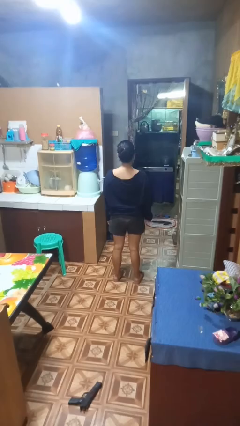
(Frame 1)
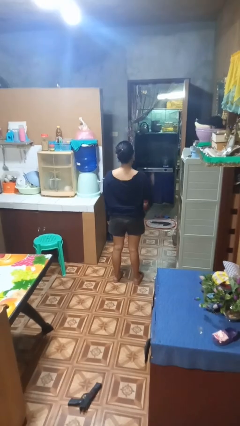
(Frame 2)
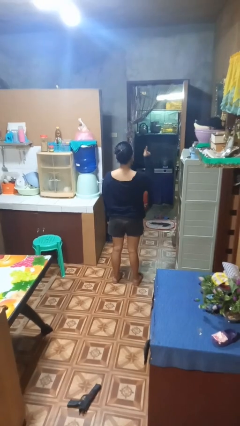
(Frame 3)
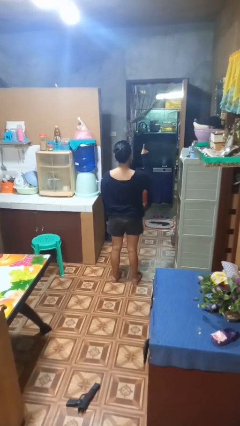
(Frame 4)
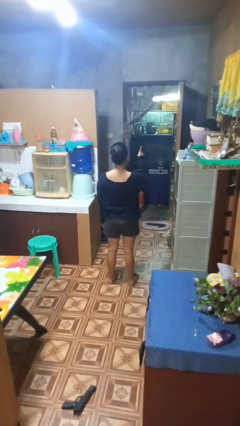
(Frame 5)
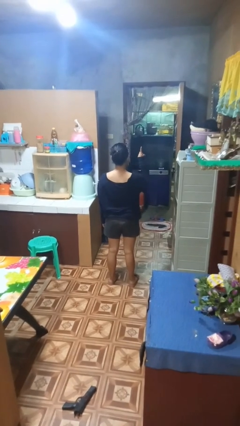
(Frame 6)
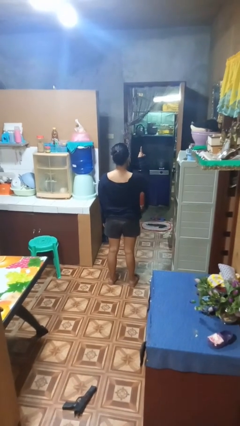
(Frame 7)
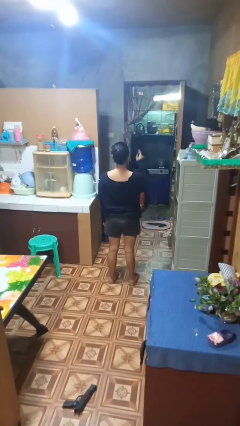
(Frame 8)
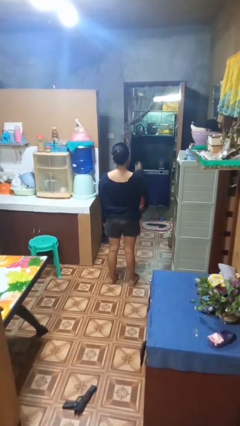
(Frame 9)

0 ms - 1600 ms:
person gestures number one

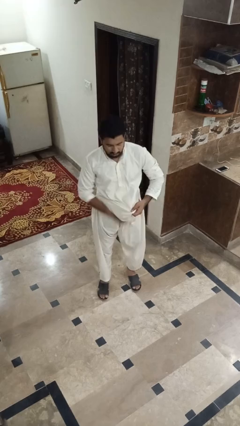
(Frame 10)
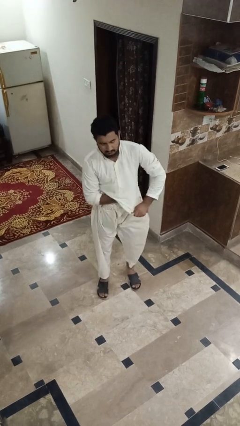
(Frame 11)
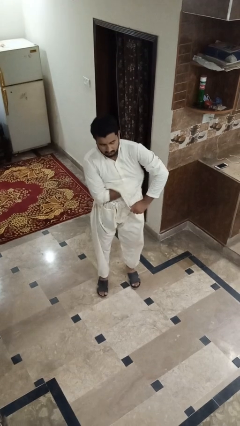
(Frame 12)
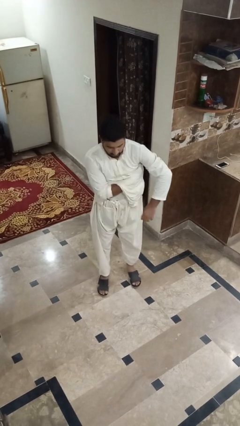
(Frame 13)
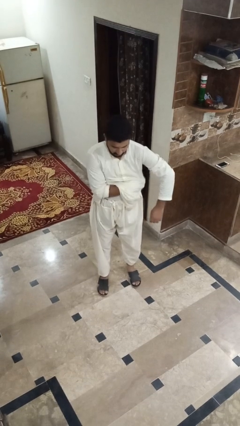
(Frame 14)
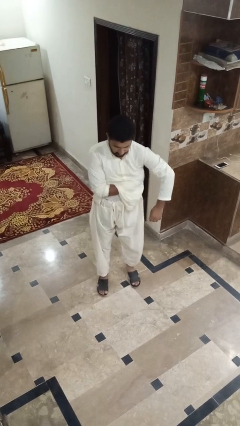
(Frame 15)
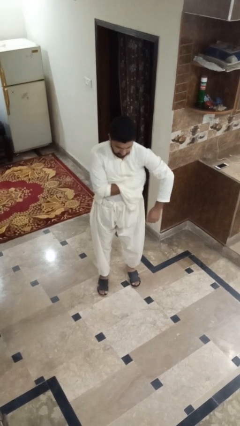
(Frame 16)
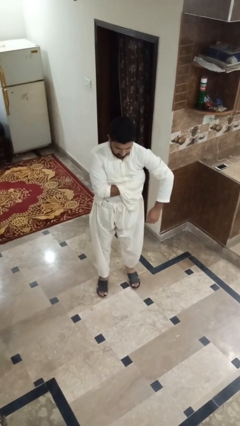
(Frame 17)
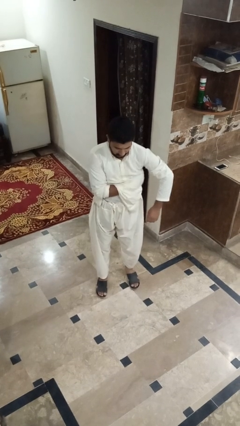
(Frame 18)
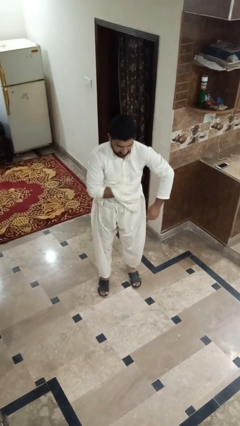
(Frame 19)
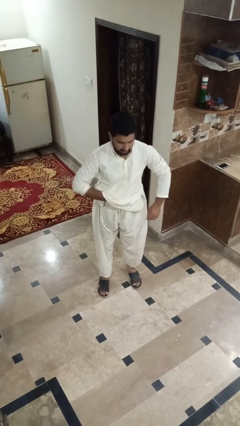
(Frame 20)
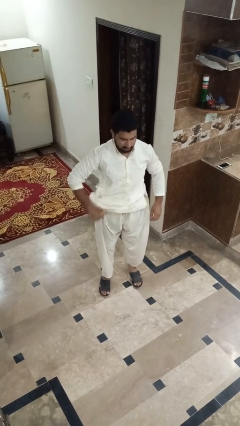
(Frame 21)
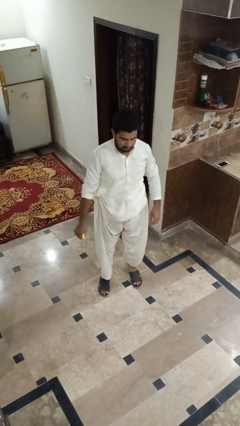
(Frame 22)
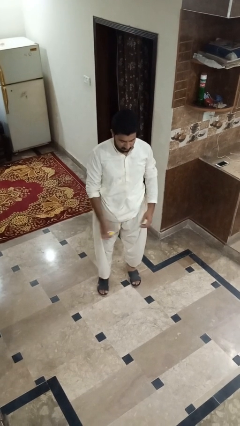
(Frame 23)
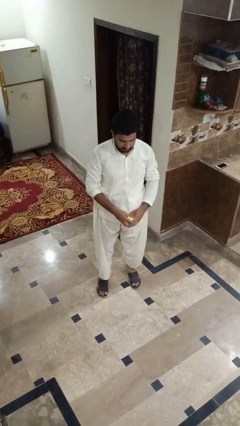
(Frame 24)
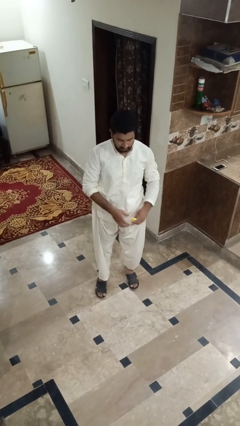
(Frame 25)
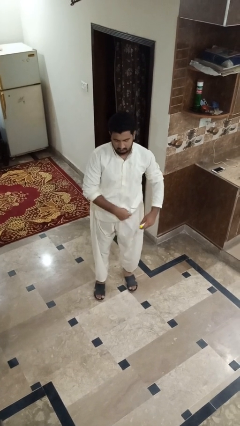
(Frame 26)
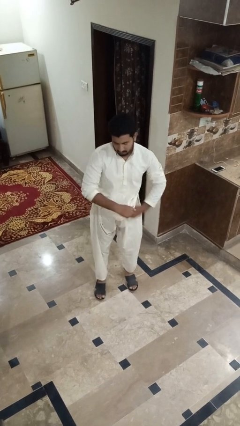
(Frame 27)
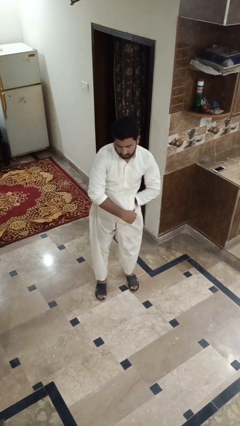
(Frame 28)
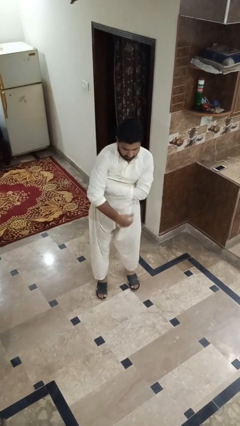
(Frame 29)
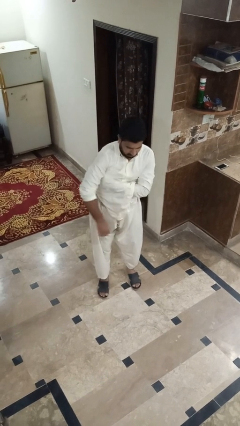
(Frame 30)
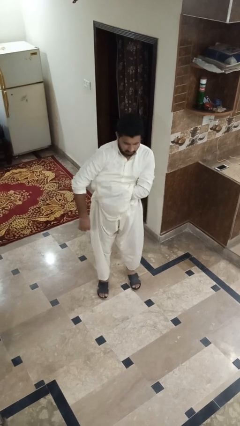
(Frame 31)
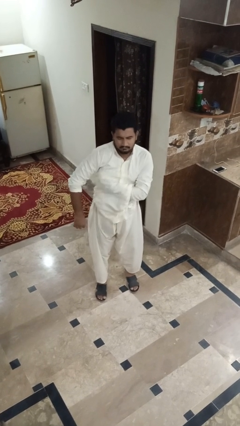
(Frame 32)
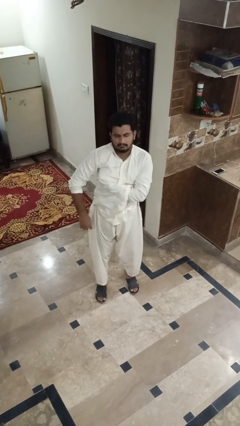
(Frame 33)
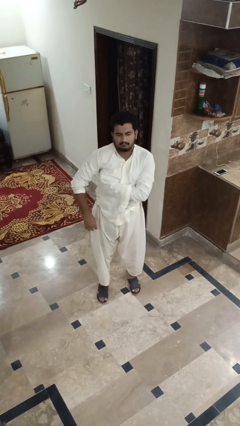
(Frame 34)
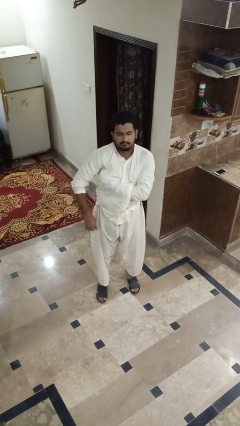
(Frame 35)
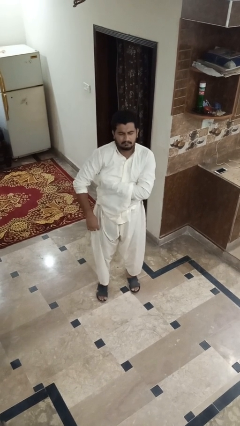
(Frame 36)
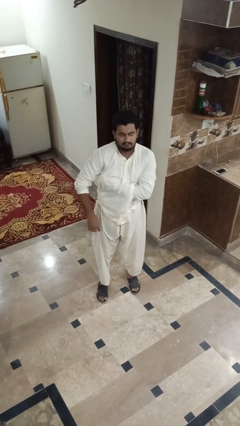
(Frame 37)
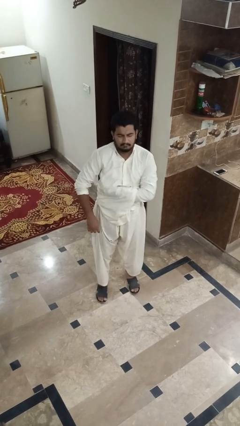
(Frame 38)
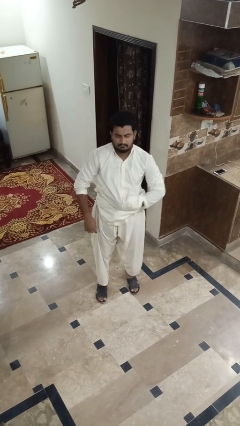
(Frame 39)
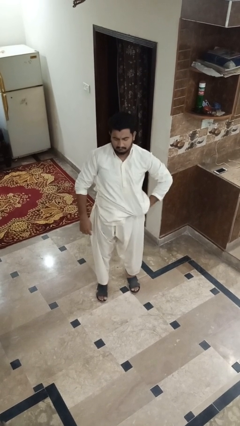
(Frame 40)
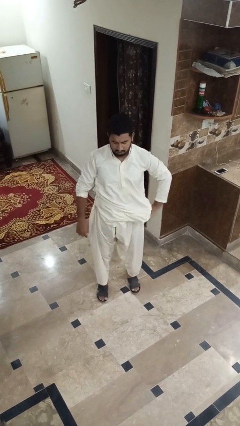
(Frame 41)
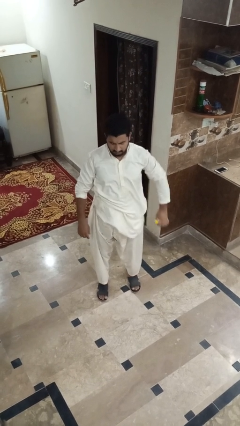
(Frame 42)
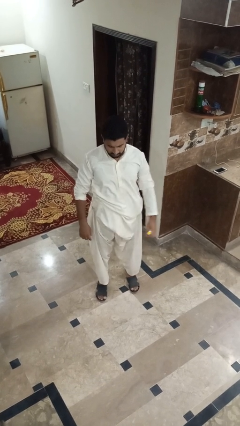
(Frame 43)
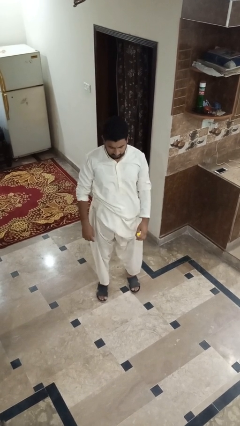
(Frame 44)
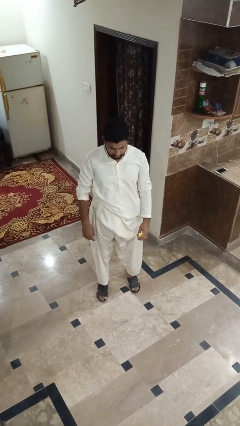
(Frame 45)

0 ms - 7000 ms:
person applies deodorant

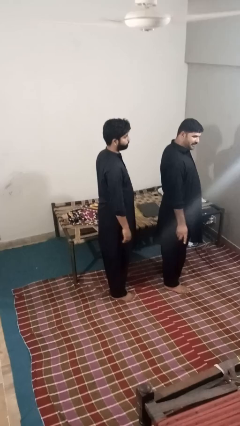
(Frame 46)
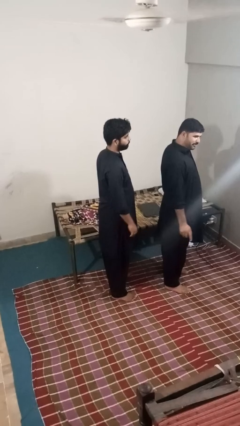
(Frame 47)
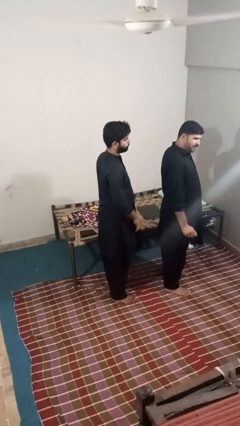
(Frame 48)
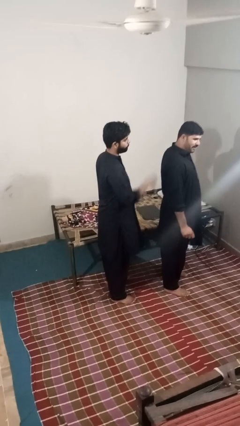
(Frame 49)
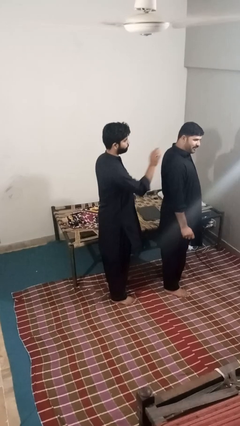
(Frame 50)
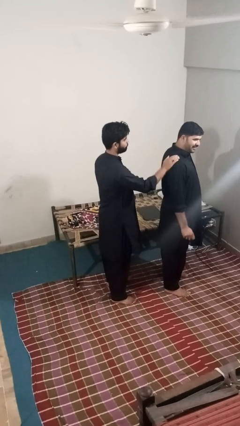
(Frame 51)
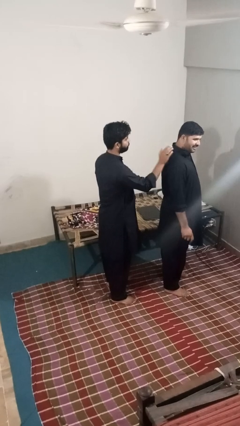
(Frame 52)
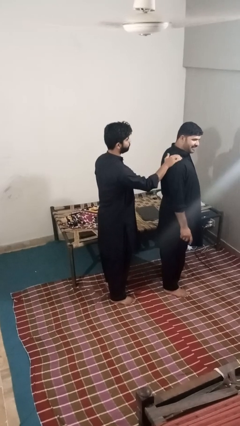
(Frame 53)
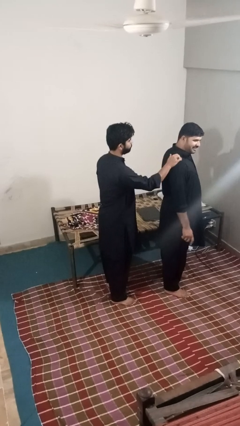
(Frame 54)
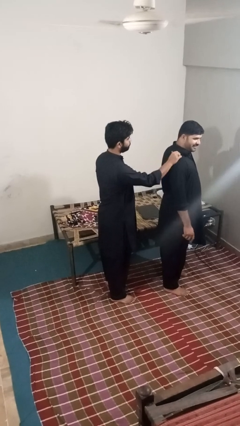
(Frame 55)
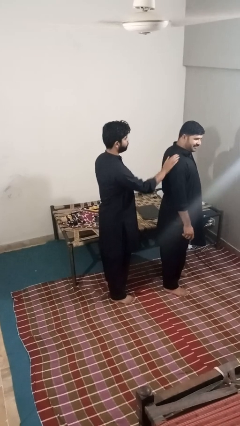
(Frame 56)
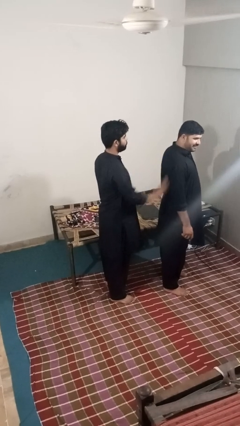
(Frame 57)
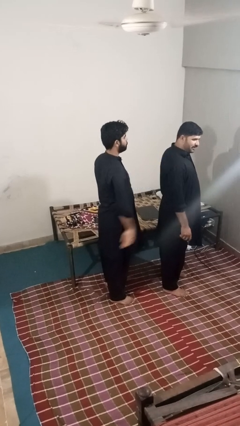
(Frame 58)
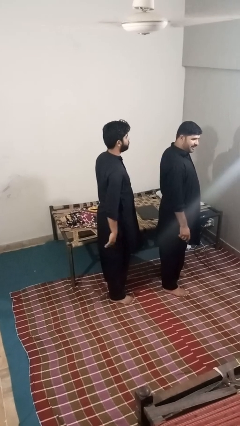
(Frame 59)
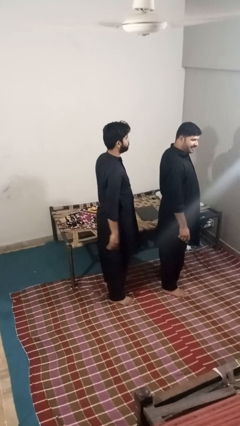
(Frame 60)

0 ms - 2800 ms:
person touches face of person

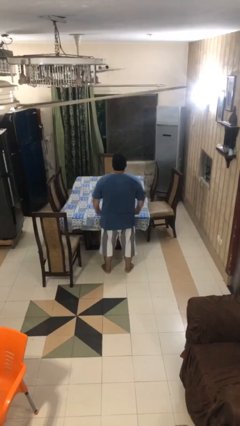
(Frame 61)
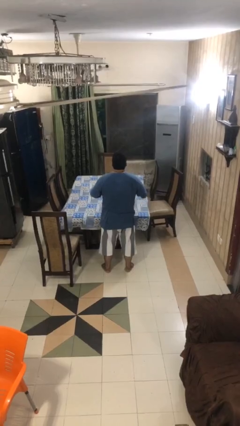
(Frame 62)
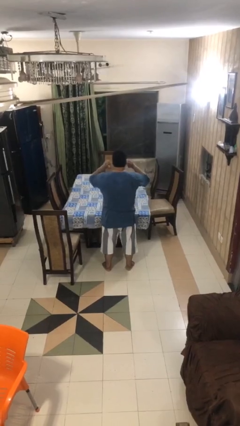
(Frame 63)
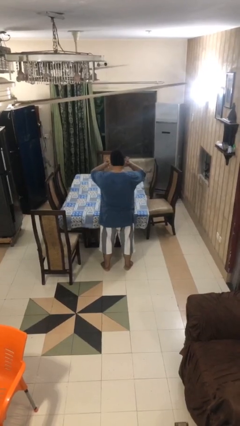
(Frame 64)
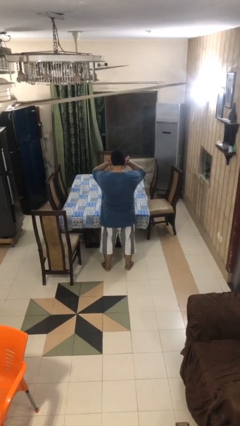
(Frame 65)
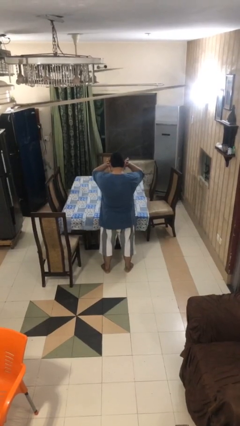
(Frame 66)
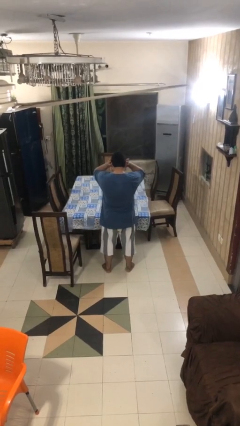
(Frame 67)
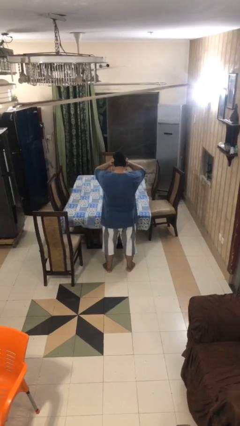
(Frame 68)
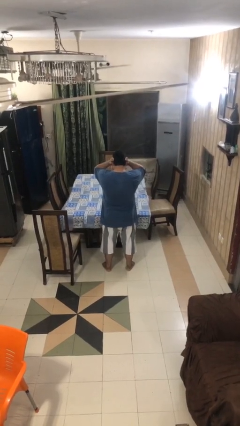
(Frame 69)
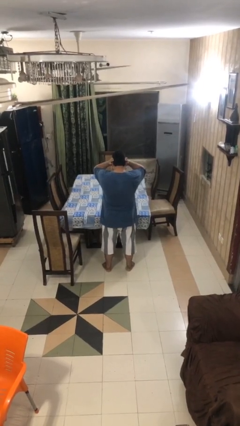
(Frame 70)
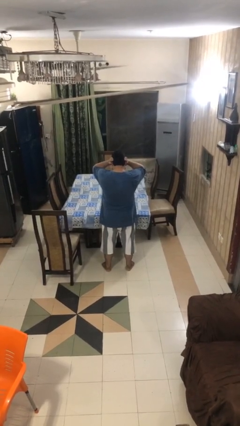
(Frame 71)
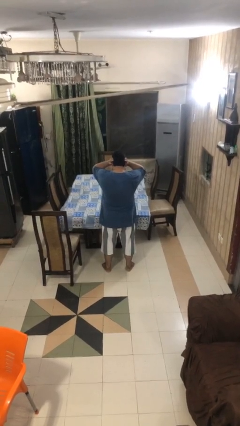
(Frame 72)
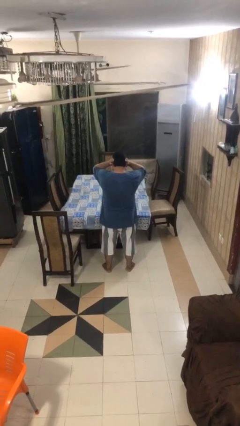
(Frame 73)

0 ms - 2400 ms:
person puts fingers in ear

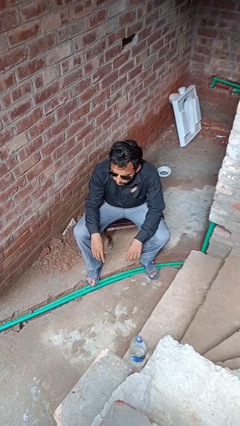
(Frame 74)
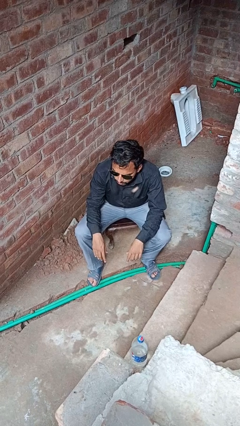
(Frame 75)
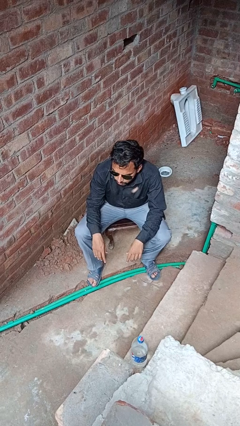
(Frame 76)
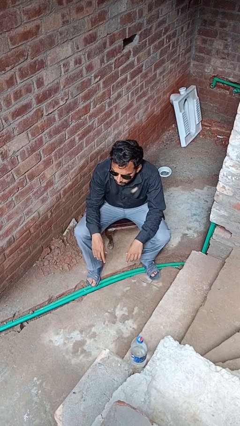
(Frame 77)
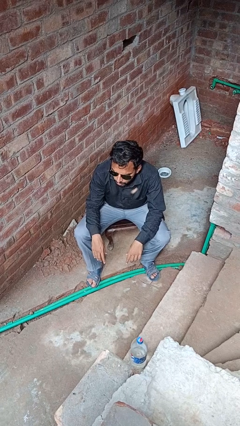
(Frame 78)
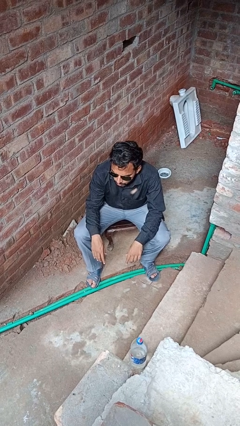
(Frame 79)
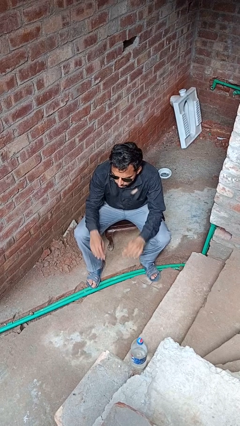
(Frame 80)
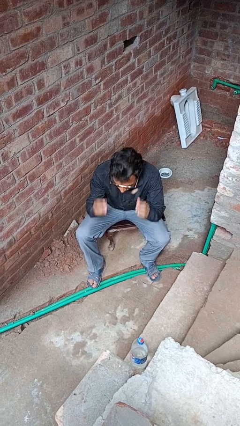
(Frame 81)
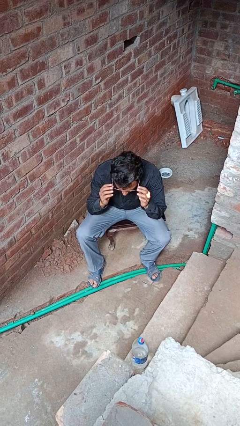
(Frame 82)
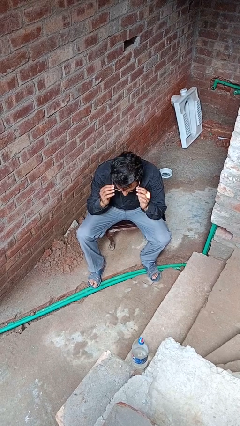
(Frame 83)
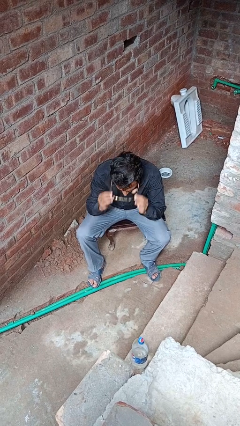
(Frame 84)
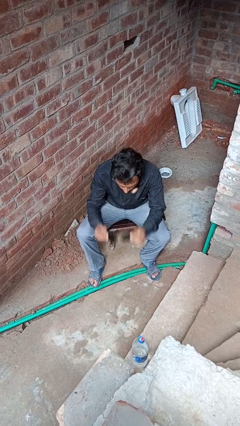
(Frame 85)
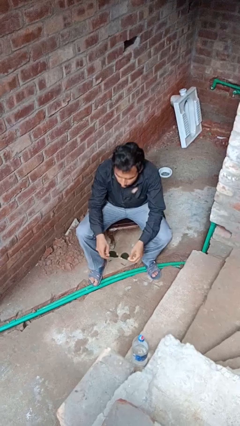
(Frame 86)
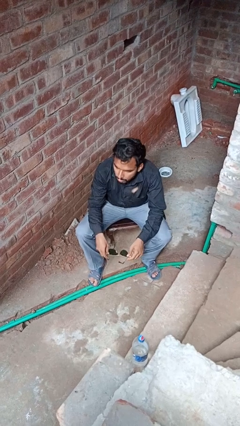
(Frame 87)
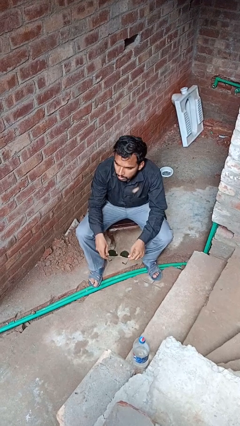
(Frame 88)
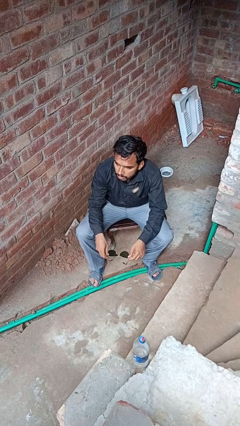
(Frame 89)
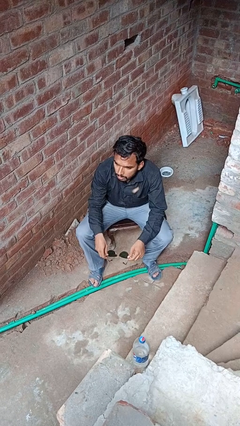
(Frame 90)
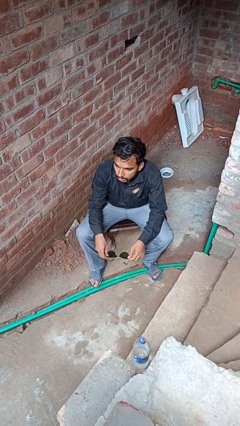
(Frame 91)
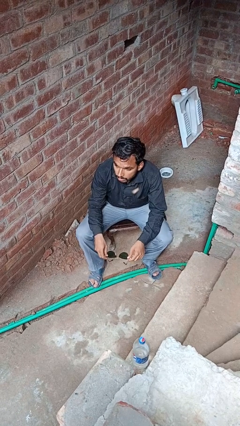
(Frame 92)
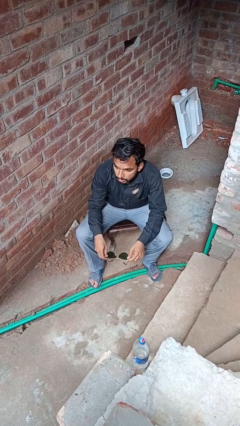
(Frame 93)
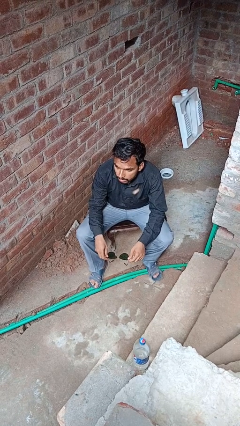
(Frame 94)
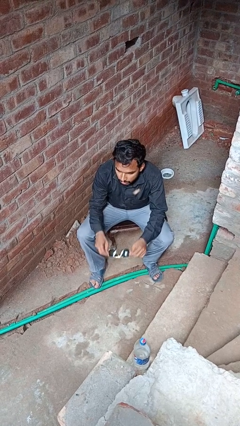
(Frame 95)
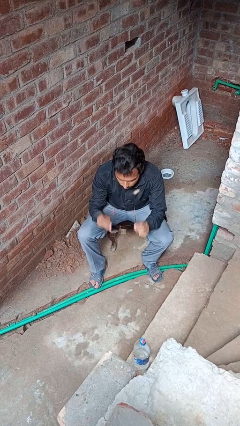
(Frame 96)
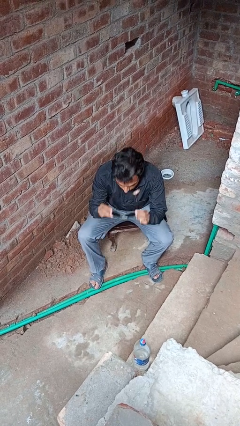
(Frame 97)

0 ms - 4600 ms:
person takes off glasses
